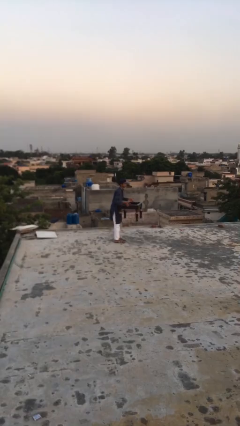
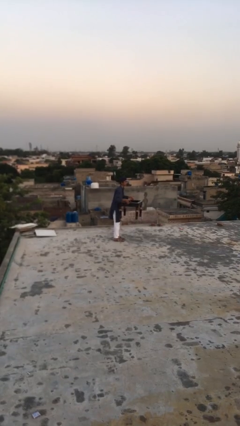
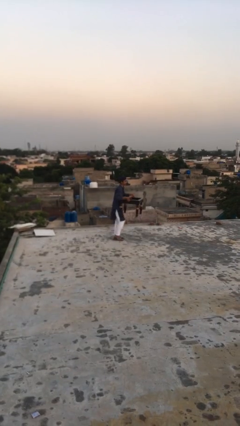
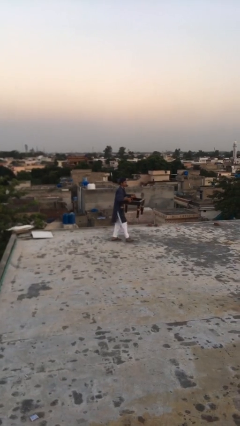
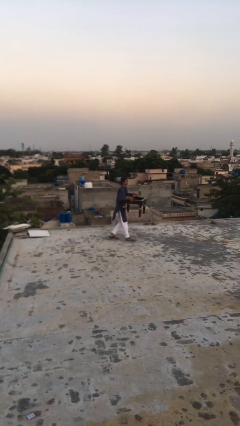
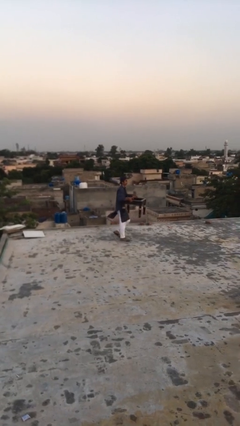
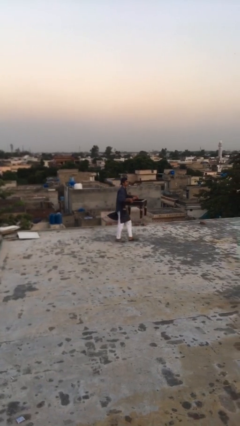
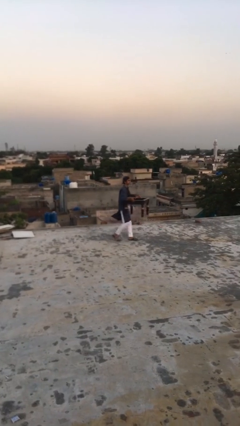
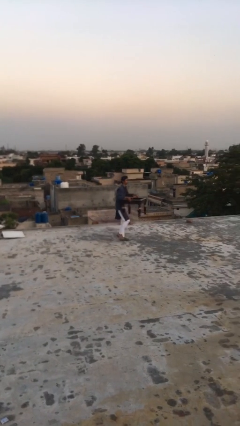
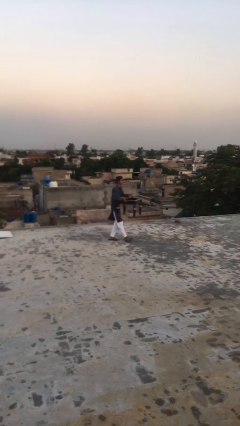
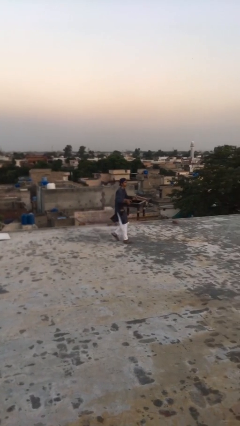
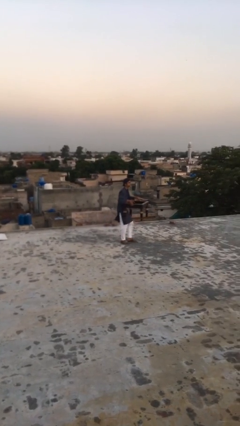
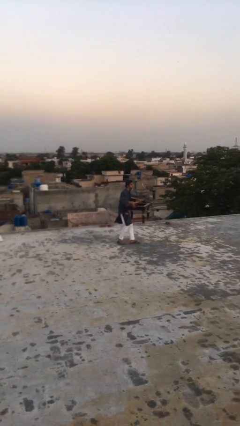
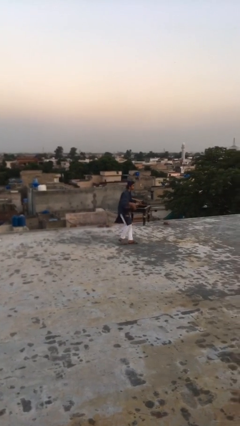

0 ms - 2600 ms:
person carries heavy object

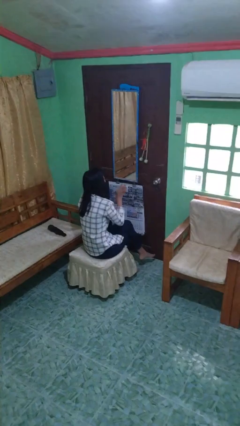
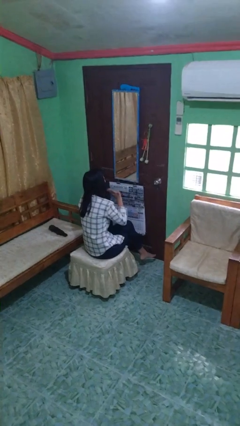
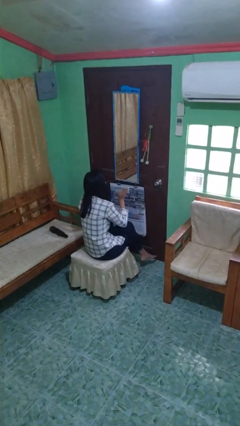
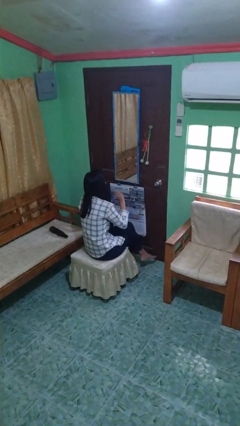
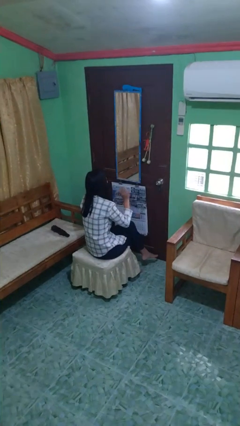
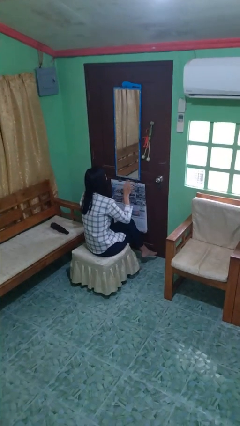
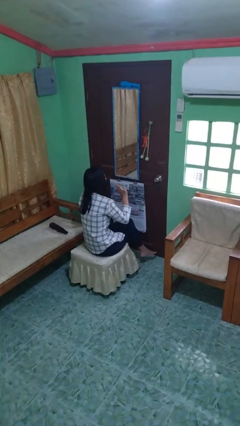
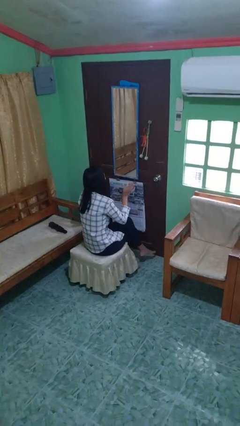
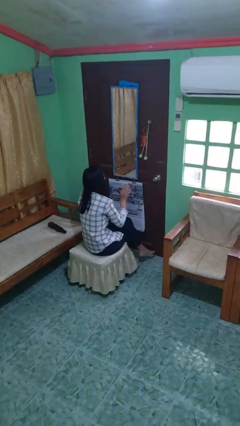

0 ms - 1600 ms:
person waves hand over object

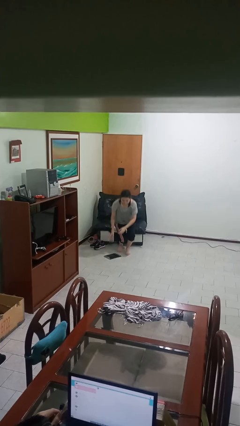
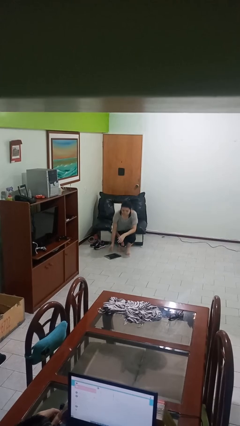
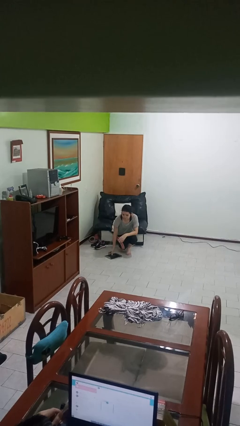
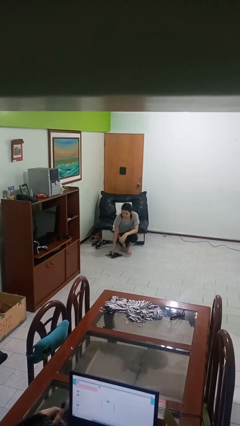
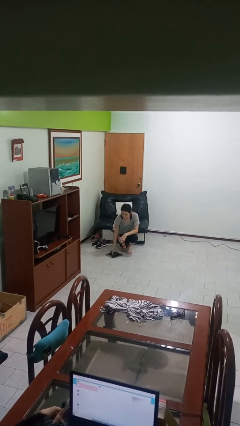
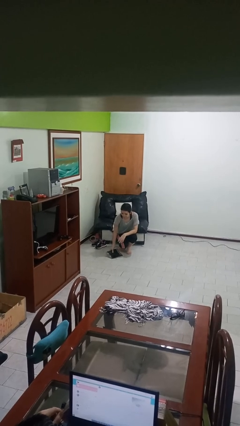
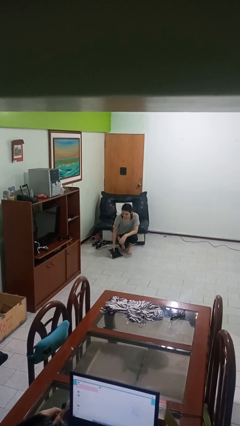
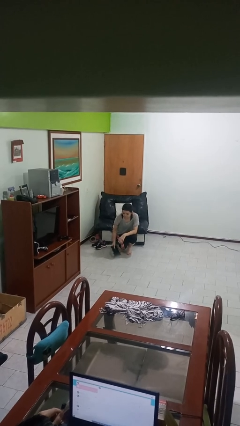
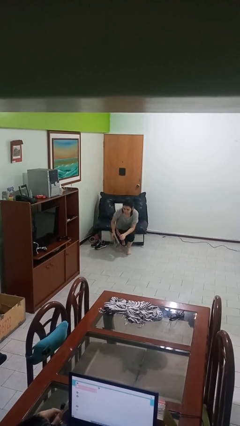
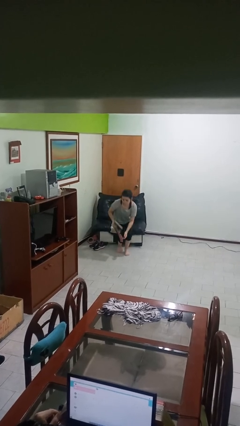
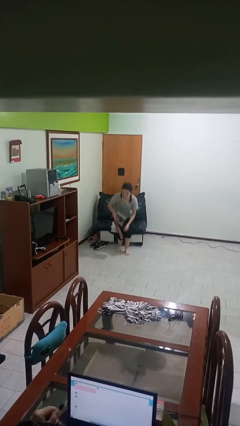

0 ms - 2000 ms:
person picks up object from floor

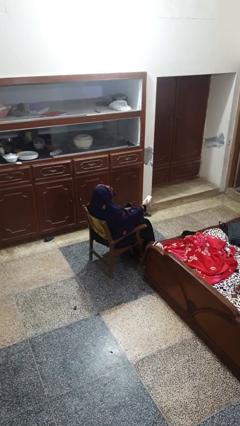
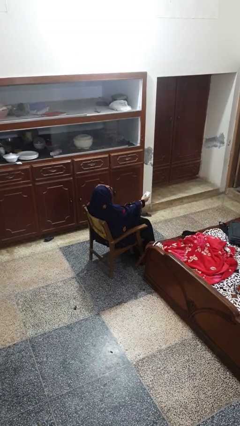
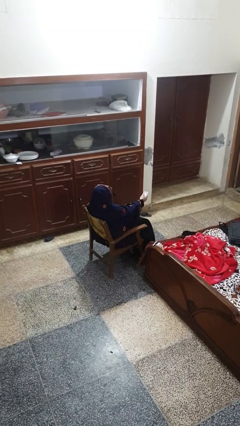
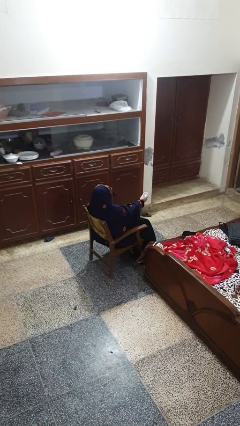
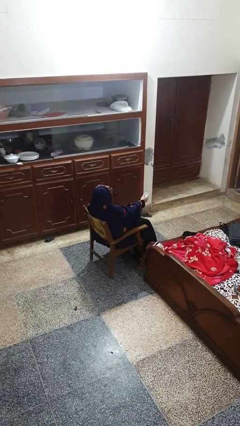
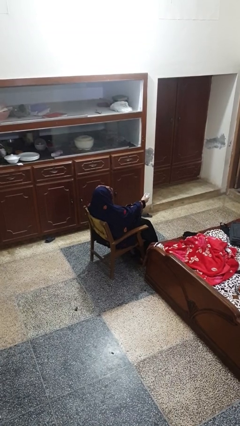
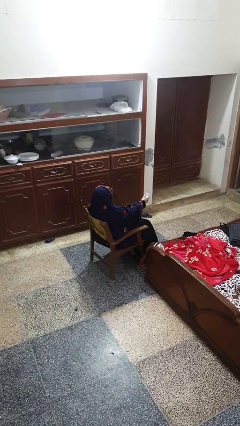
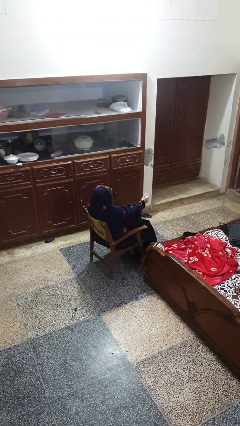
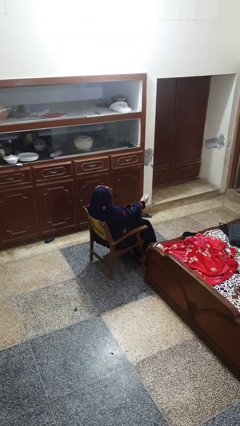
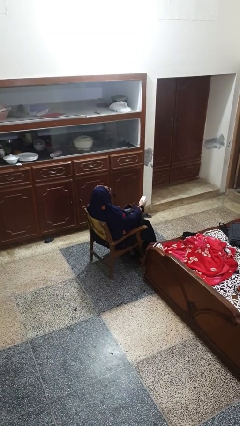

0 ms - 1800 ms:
person uses television remote

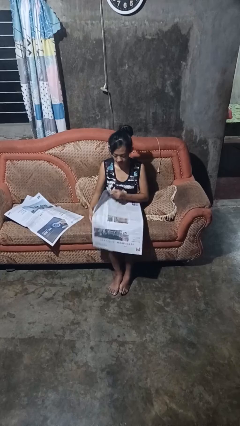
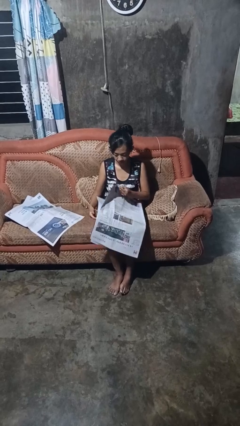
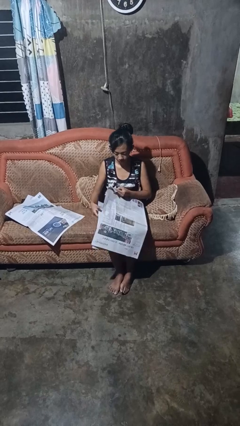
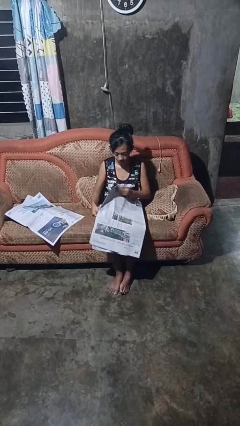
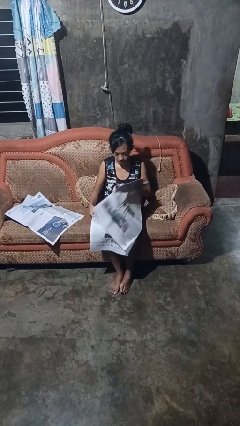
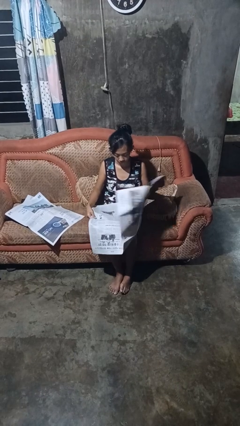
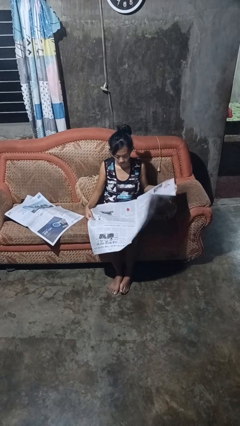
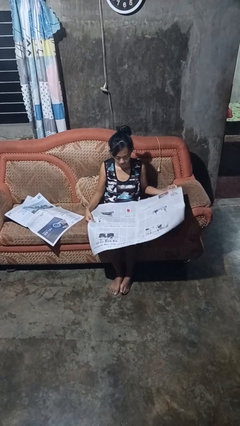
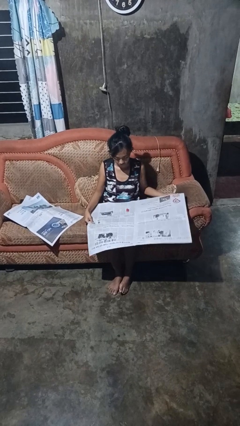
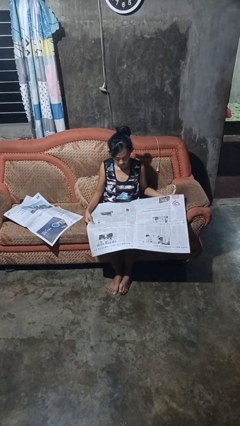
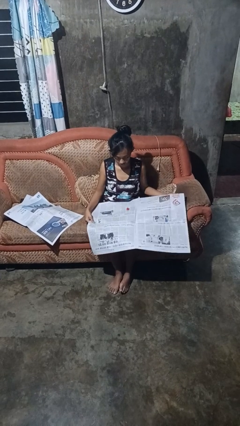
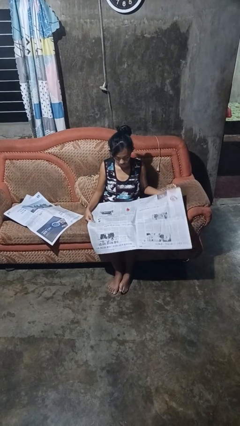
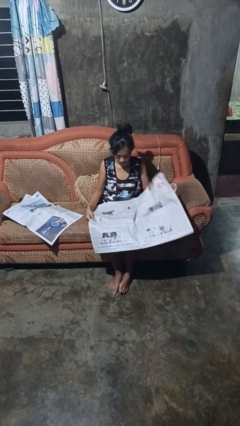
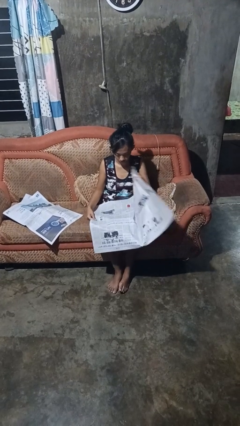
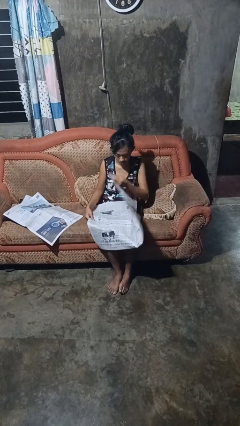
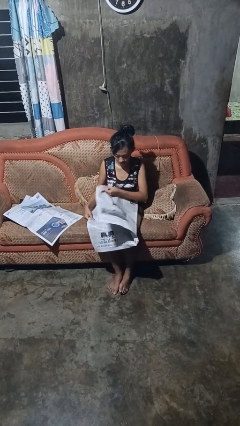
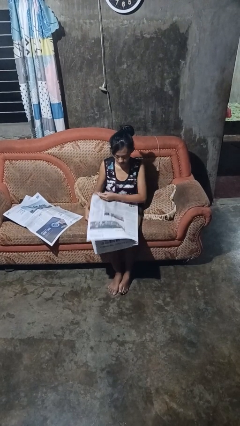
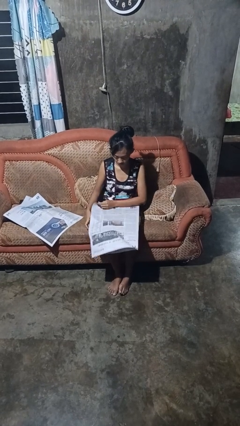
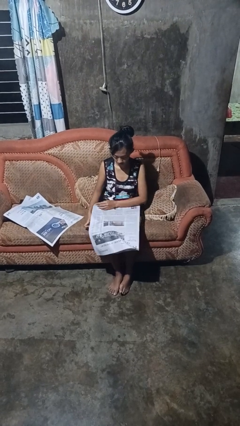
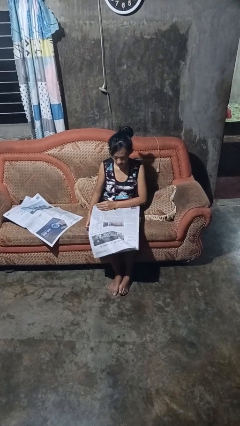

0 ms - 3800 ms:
person reads newspaper

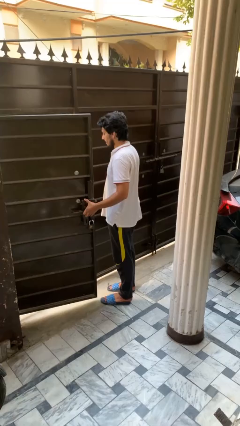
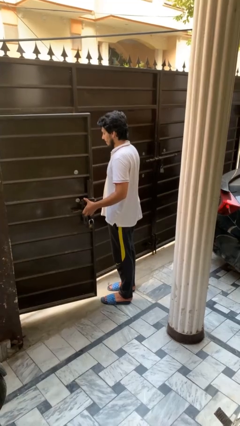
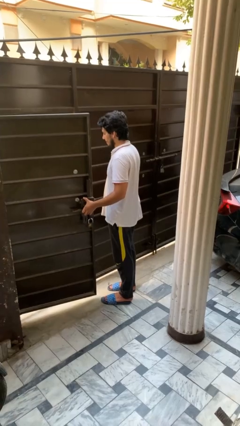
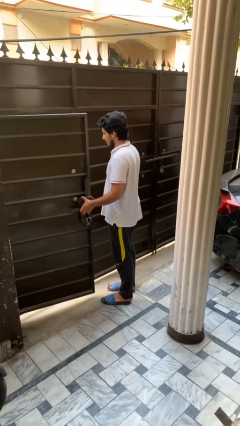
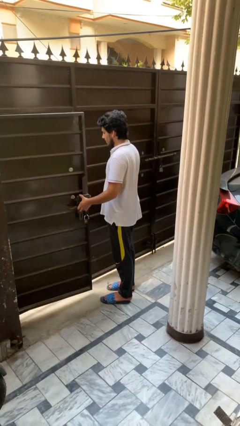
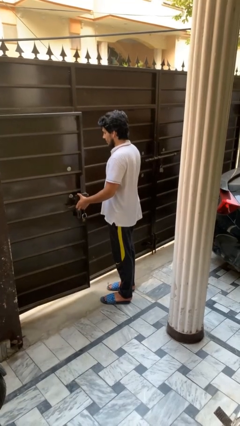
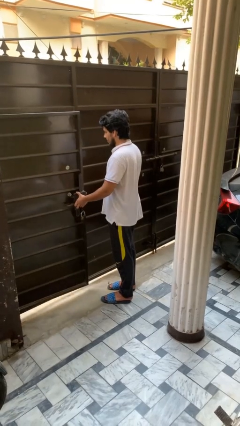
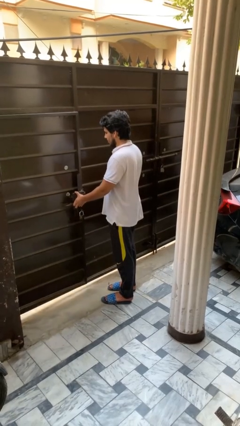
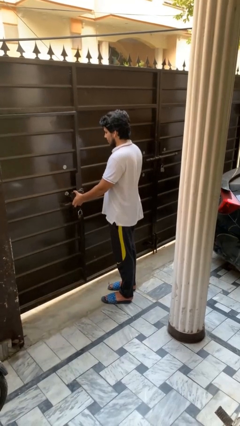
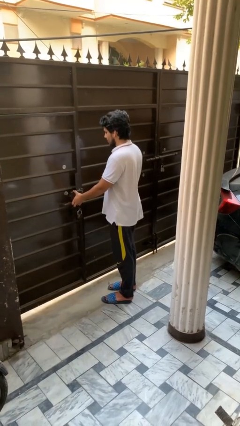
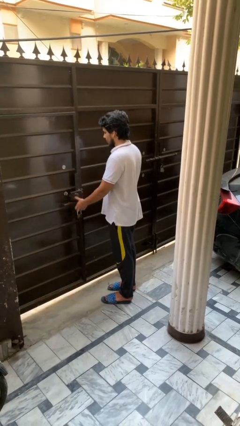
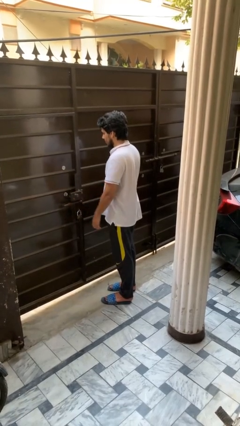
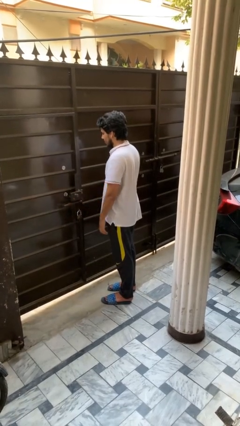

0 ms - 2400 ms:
person closes gate

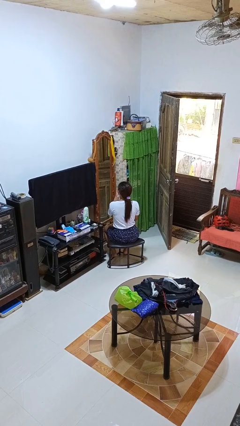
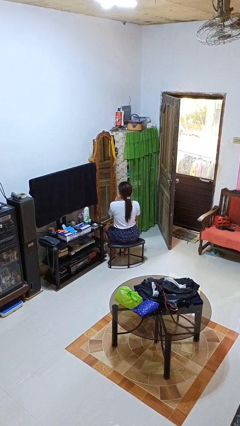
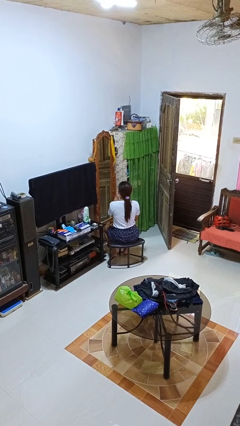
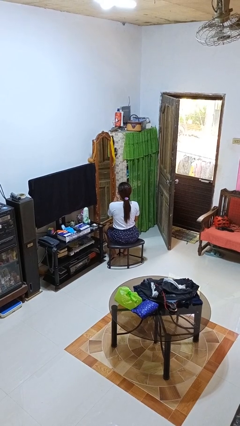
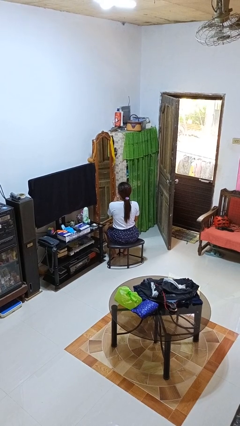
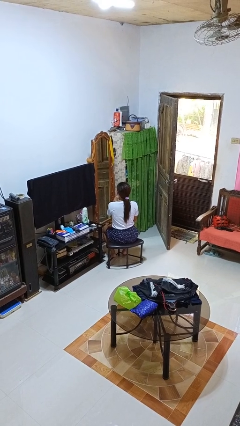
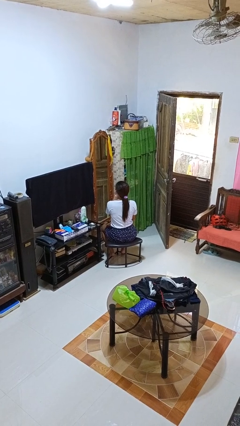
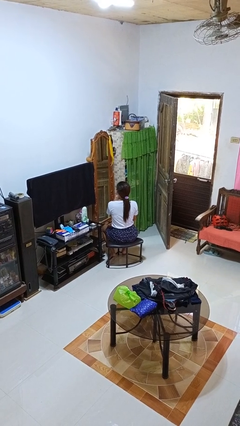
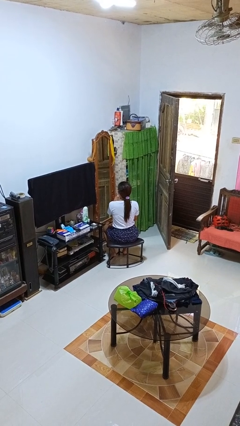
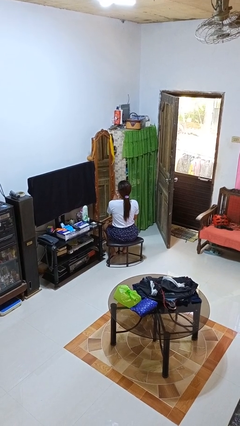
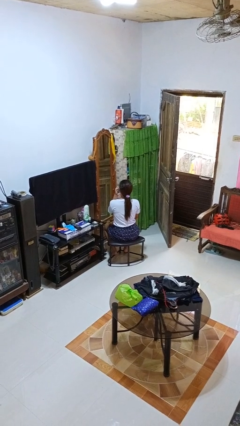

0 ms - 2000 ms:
person applies lip makeup

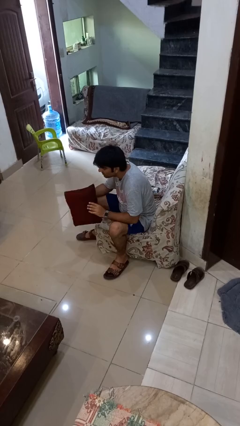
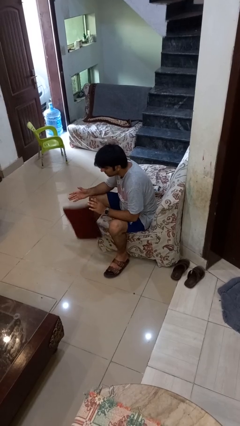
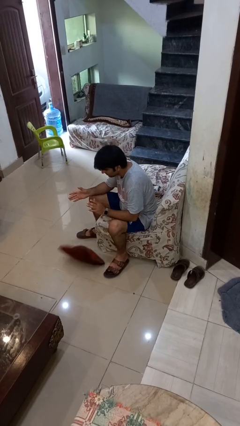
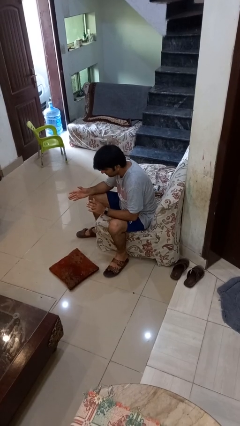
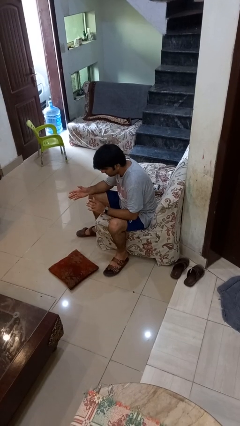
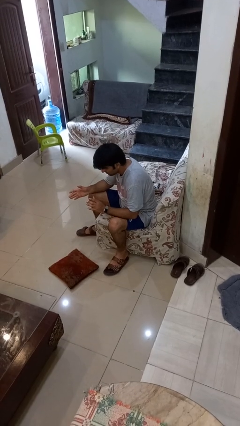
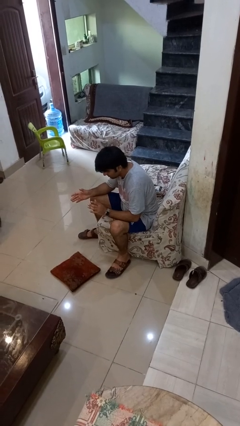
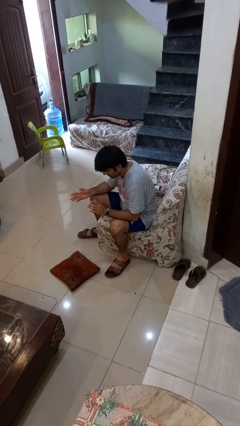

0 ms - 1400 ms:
person drops object
